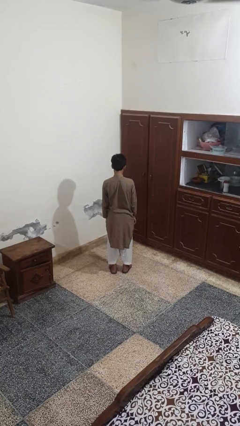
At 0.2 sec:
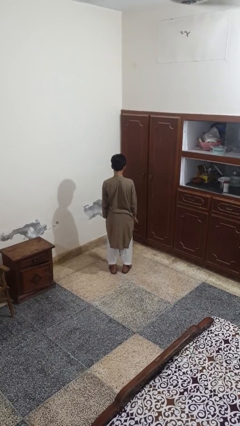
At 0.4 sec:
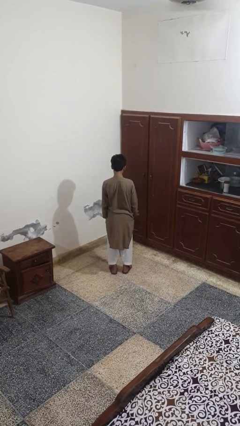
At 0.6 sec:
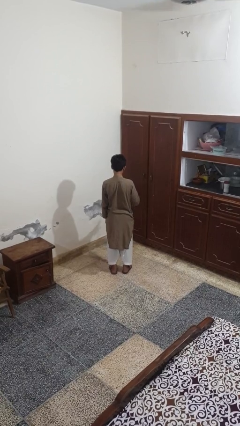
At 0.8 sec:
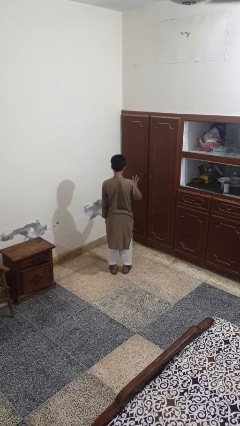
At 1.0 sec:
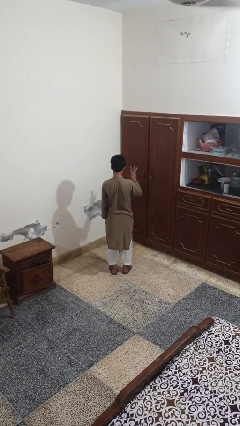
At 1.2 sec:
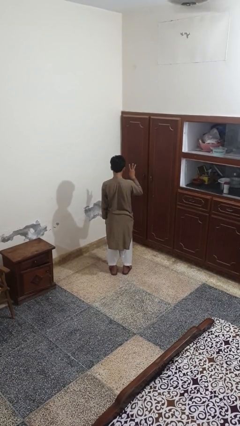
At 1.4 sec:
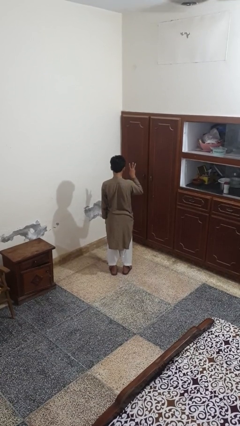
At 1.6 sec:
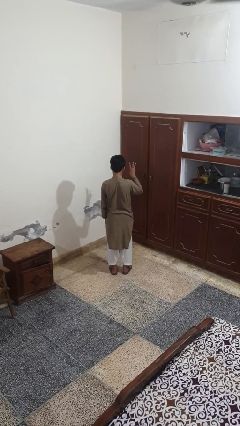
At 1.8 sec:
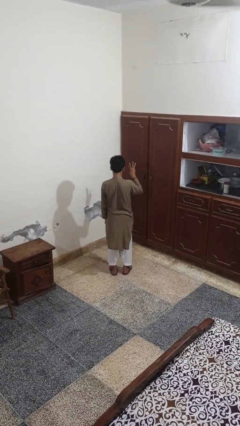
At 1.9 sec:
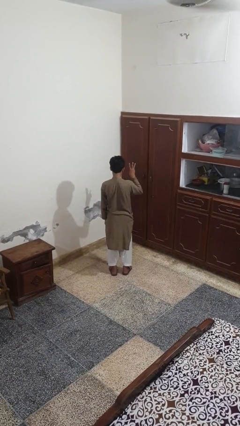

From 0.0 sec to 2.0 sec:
person gestures number three

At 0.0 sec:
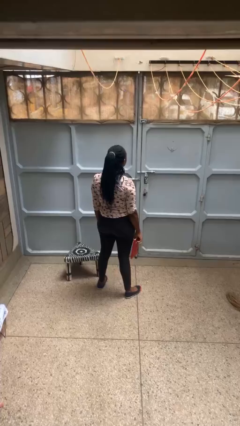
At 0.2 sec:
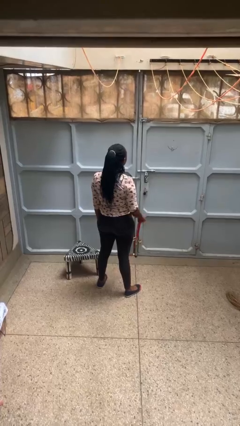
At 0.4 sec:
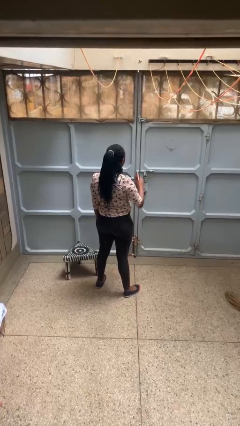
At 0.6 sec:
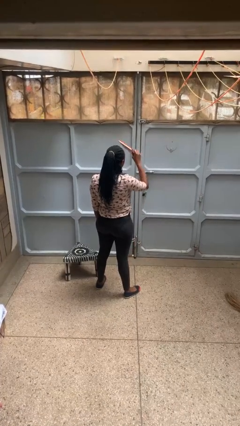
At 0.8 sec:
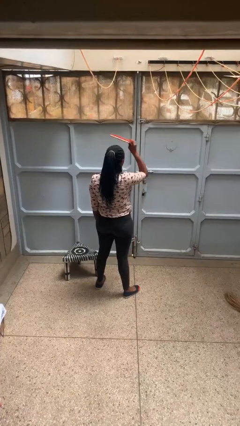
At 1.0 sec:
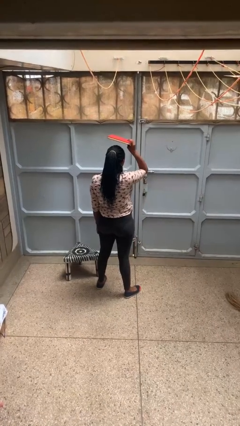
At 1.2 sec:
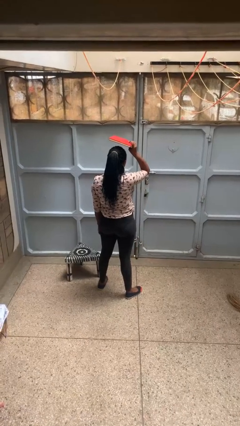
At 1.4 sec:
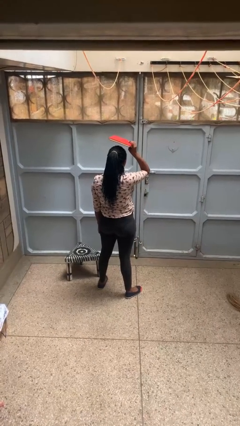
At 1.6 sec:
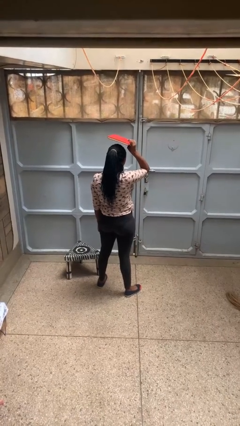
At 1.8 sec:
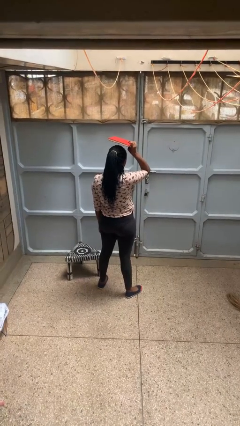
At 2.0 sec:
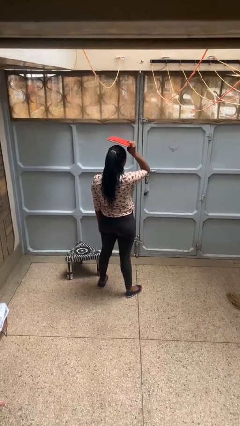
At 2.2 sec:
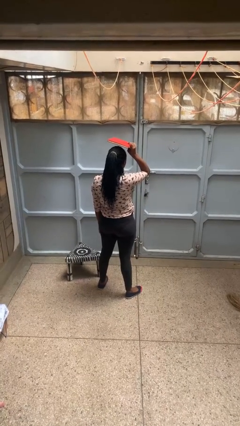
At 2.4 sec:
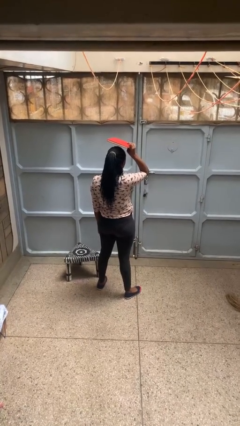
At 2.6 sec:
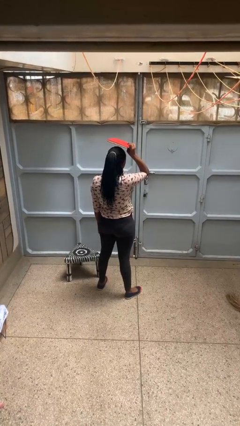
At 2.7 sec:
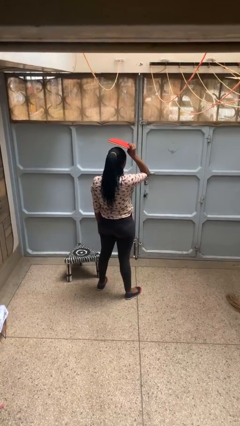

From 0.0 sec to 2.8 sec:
person holds object above head

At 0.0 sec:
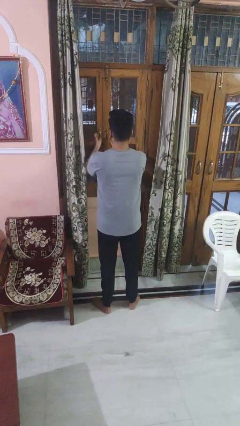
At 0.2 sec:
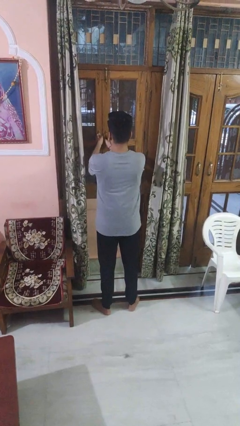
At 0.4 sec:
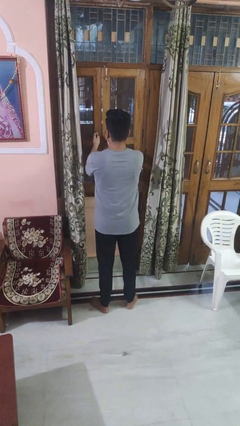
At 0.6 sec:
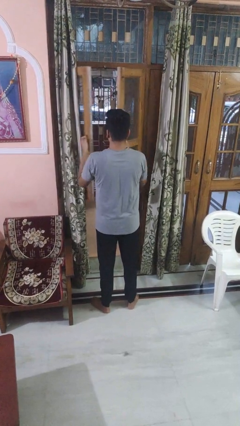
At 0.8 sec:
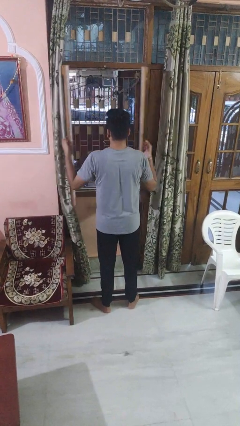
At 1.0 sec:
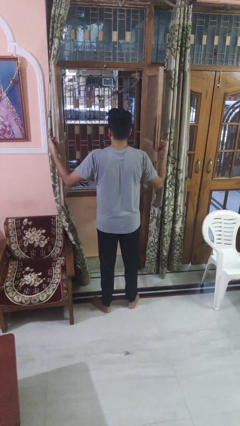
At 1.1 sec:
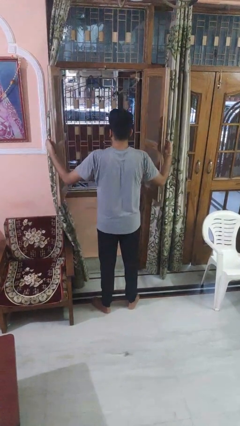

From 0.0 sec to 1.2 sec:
person opens home window

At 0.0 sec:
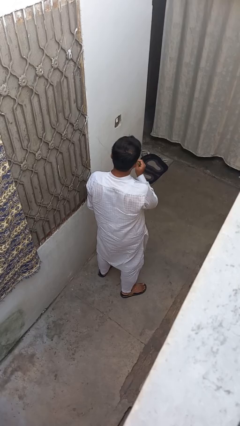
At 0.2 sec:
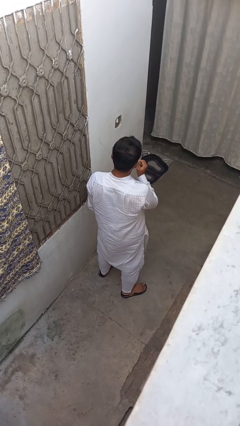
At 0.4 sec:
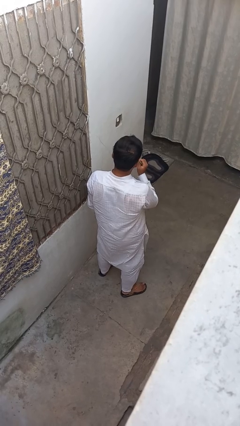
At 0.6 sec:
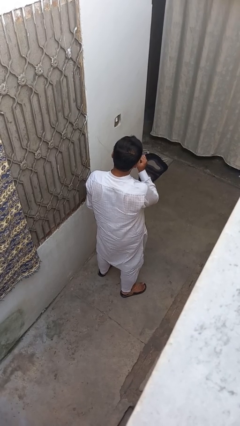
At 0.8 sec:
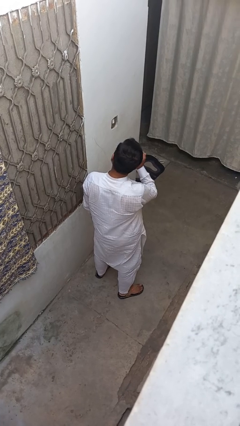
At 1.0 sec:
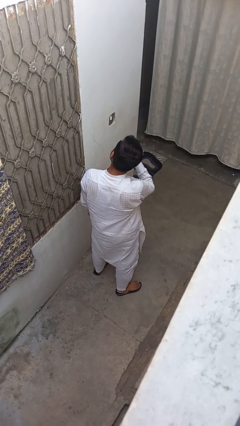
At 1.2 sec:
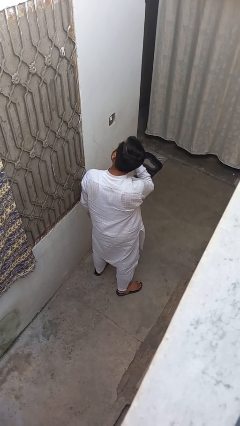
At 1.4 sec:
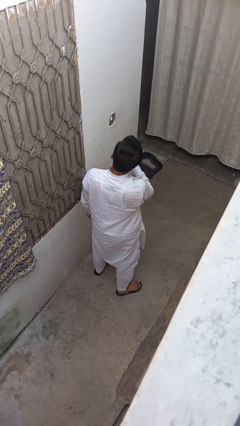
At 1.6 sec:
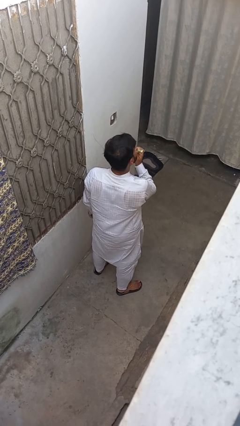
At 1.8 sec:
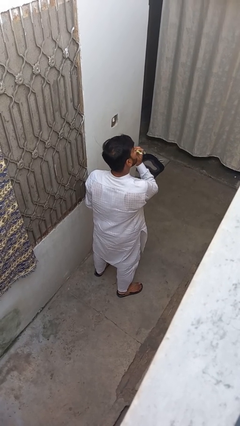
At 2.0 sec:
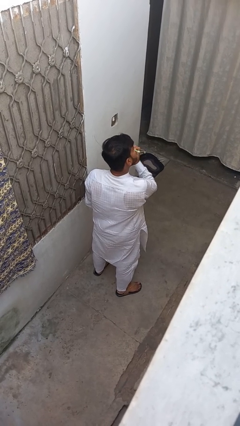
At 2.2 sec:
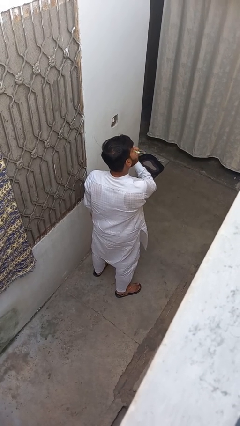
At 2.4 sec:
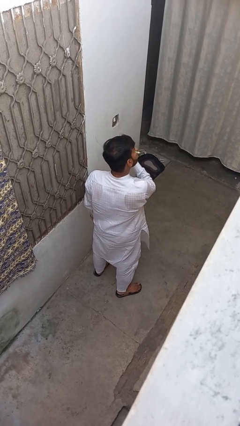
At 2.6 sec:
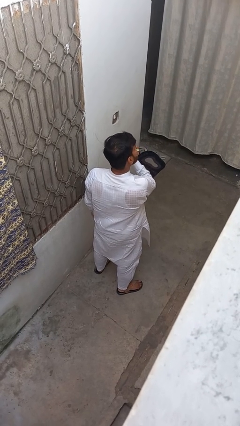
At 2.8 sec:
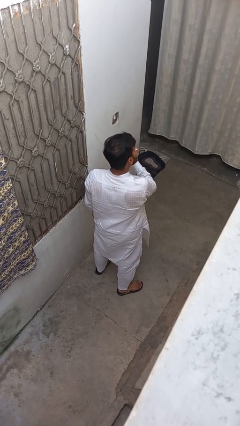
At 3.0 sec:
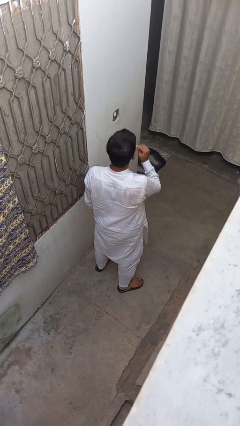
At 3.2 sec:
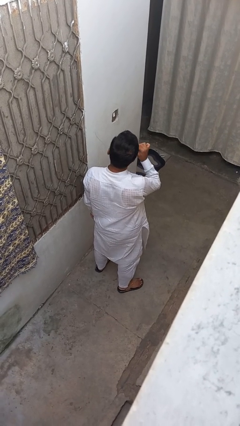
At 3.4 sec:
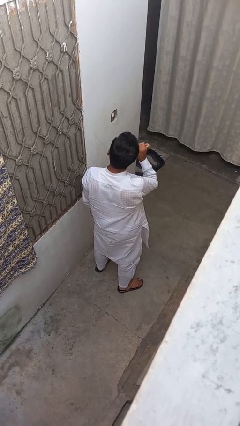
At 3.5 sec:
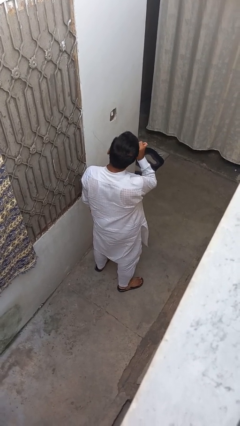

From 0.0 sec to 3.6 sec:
person brushes teeth

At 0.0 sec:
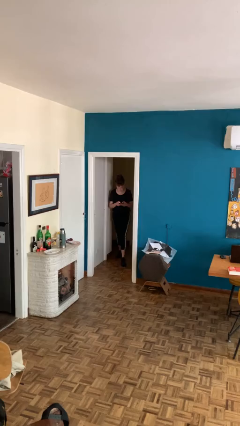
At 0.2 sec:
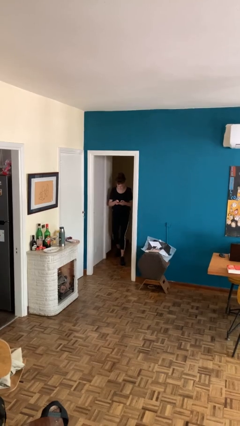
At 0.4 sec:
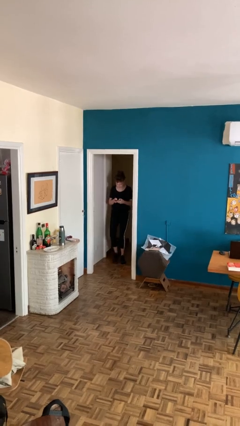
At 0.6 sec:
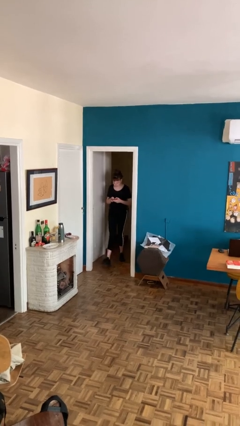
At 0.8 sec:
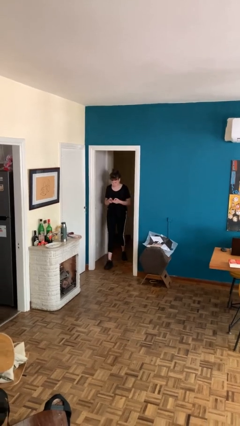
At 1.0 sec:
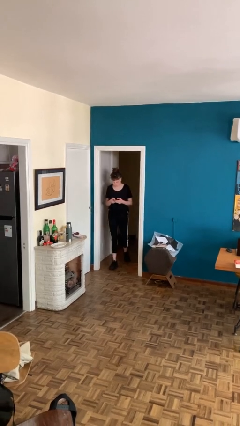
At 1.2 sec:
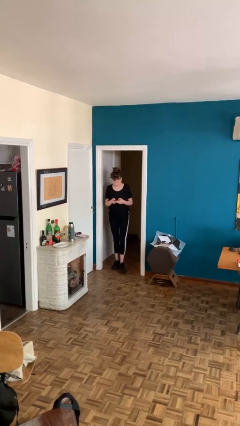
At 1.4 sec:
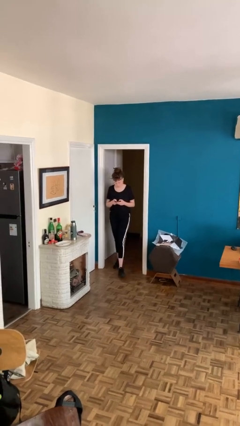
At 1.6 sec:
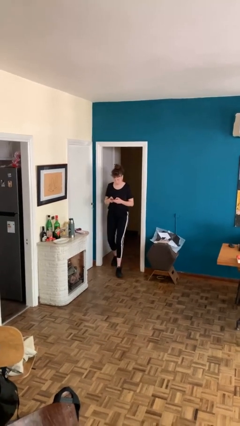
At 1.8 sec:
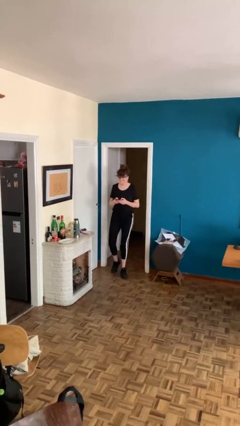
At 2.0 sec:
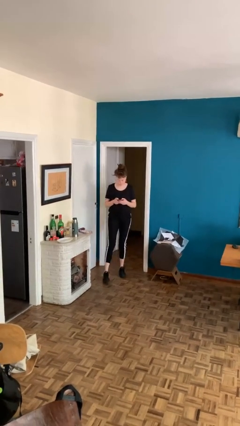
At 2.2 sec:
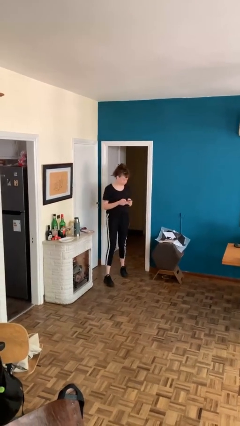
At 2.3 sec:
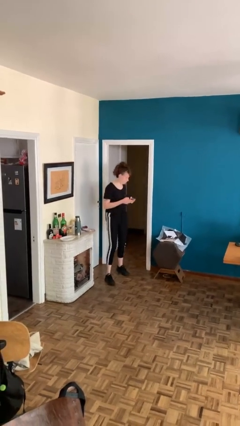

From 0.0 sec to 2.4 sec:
person enters scene through structure

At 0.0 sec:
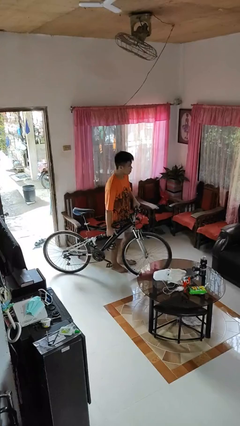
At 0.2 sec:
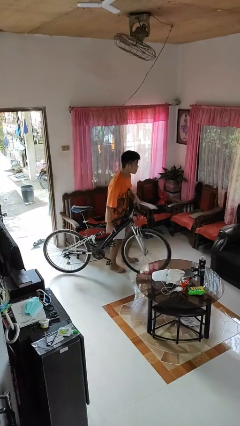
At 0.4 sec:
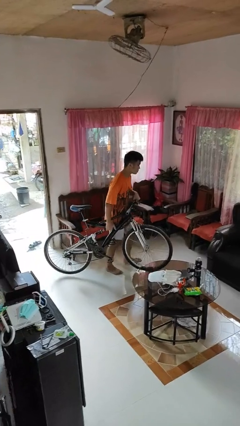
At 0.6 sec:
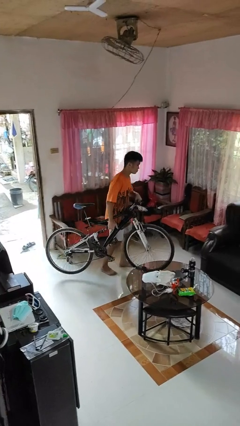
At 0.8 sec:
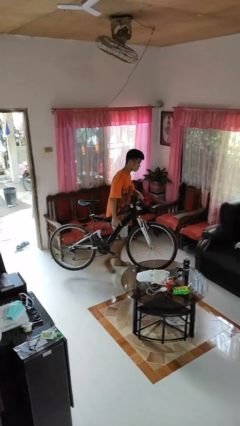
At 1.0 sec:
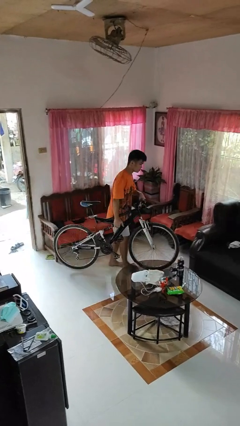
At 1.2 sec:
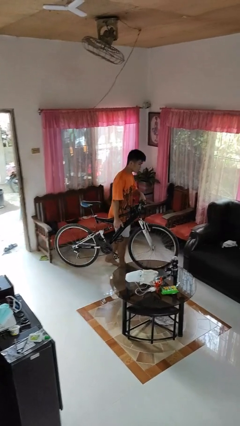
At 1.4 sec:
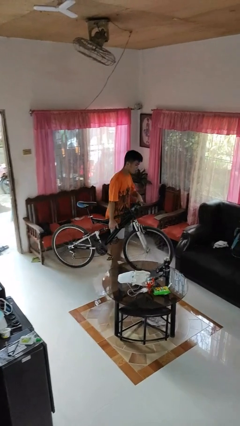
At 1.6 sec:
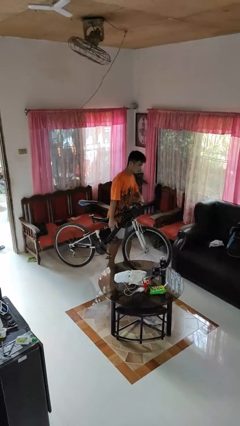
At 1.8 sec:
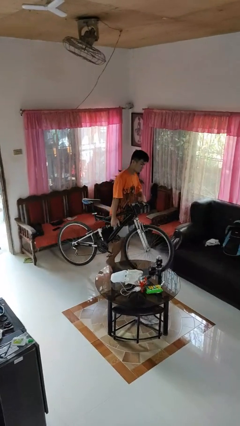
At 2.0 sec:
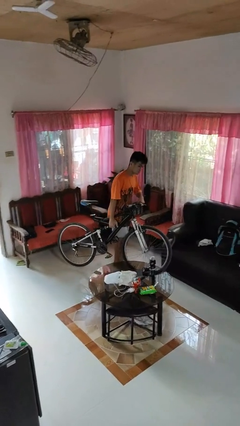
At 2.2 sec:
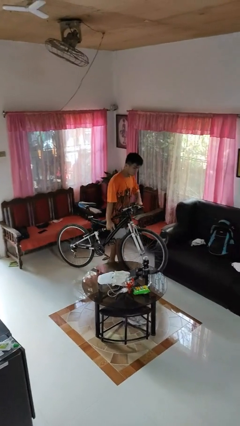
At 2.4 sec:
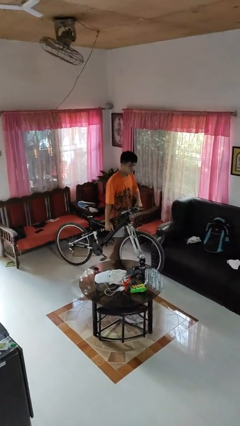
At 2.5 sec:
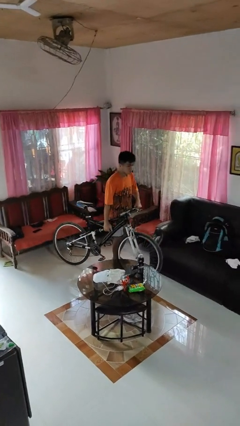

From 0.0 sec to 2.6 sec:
person carries bicycle

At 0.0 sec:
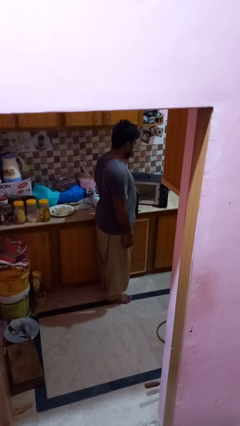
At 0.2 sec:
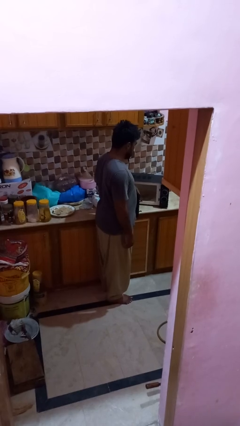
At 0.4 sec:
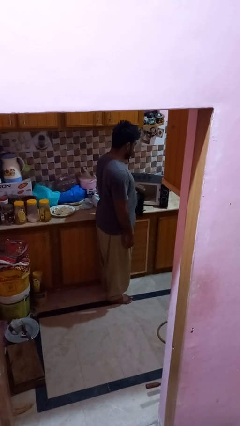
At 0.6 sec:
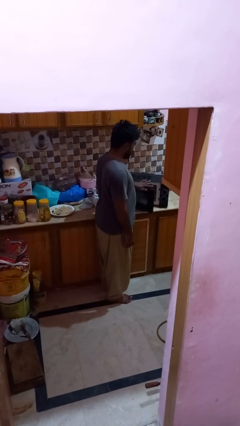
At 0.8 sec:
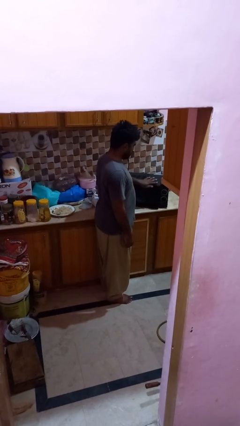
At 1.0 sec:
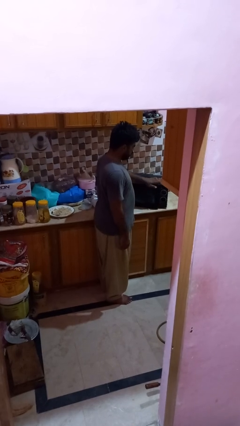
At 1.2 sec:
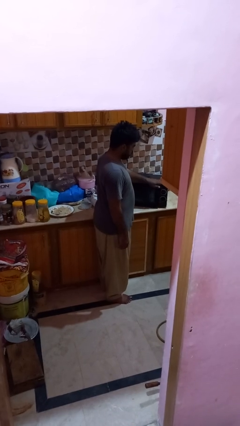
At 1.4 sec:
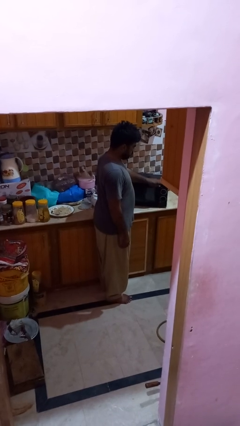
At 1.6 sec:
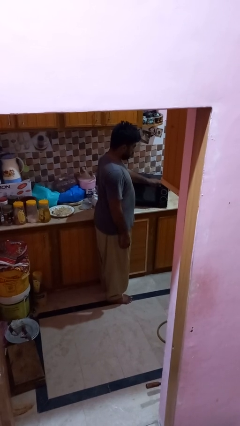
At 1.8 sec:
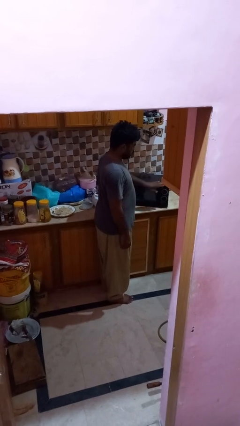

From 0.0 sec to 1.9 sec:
person closes microwave
